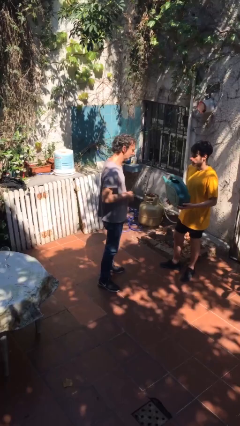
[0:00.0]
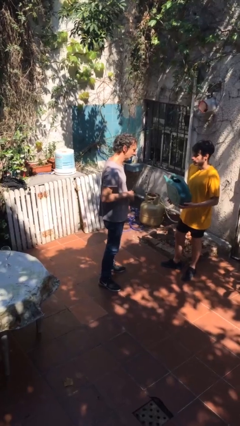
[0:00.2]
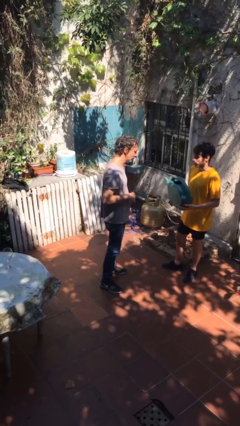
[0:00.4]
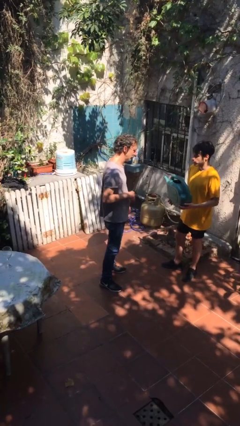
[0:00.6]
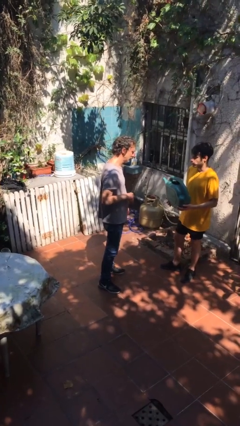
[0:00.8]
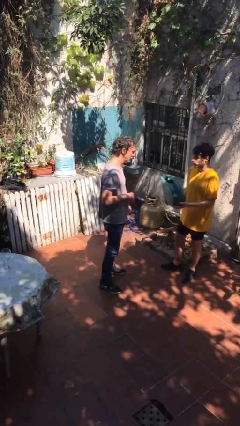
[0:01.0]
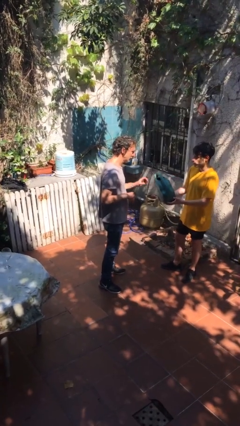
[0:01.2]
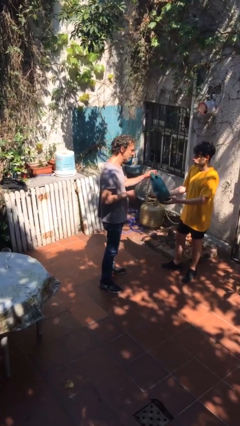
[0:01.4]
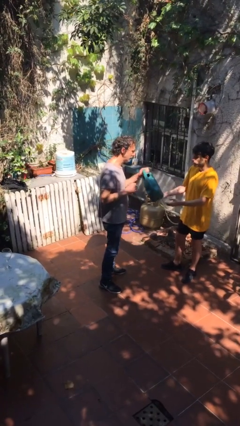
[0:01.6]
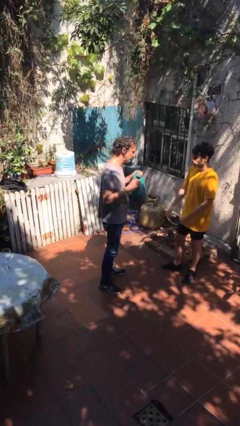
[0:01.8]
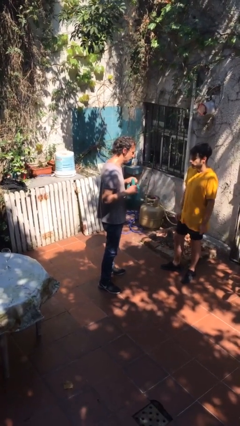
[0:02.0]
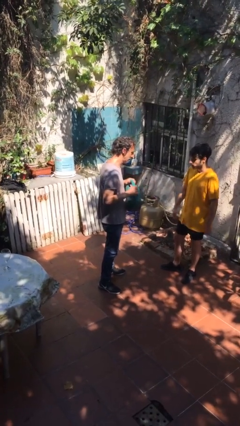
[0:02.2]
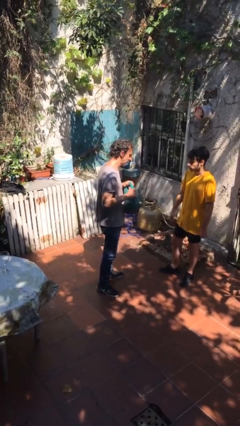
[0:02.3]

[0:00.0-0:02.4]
person transfers object to person

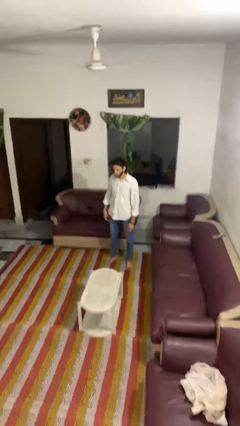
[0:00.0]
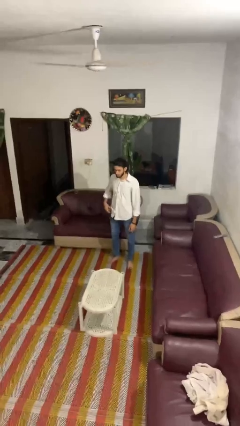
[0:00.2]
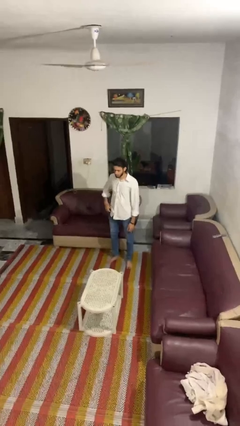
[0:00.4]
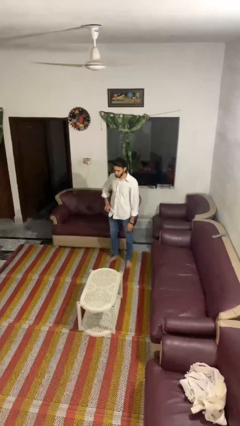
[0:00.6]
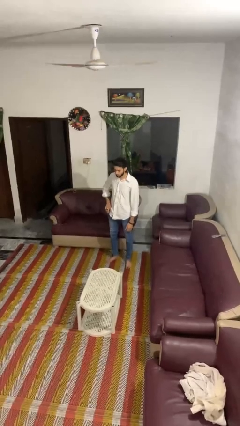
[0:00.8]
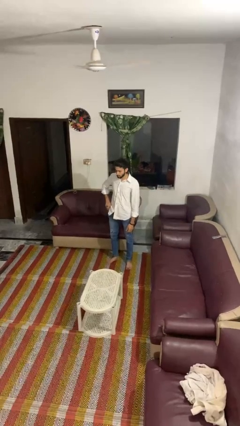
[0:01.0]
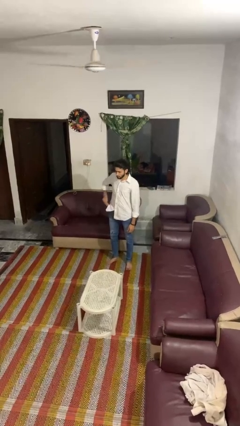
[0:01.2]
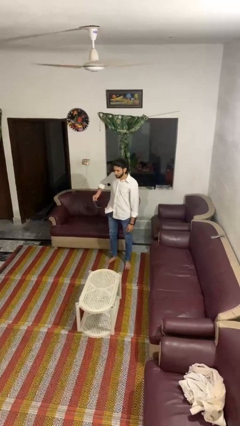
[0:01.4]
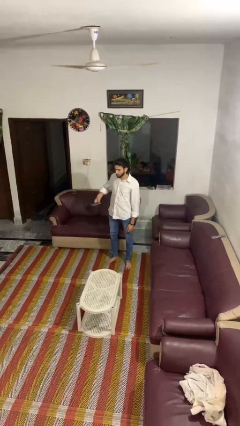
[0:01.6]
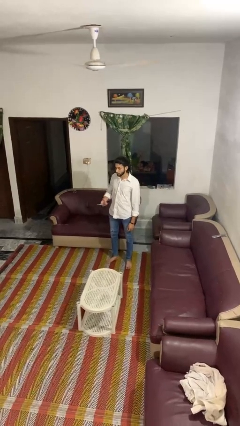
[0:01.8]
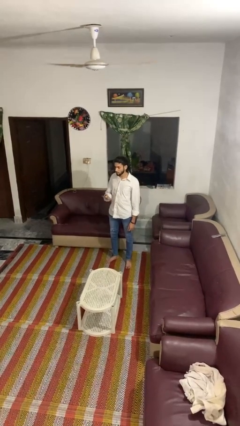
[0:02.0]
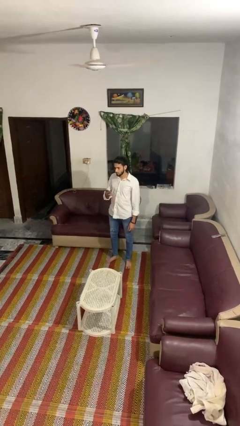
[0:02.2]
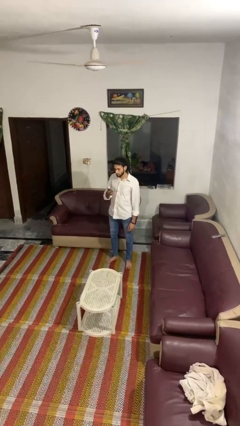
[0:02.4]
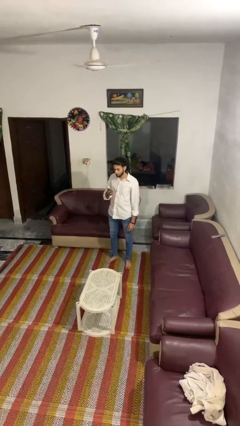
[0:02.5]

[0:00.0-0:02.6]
person takes phone from pocket

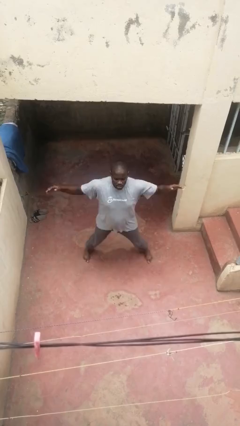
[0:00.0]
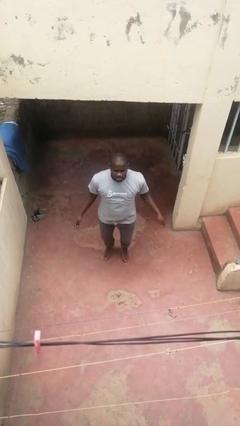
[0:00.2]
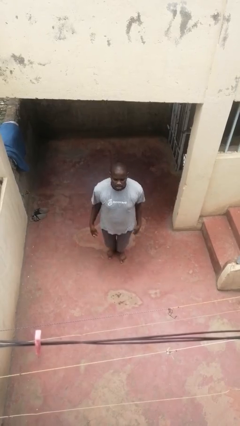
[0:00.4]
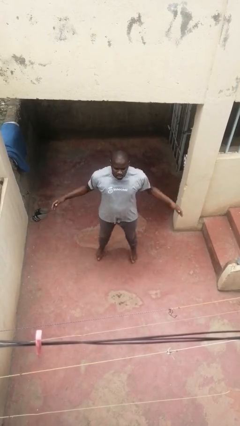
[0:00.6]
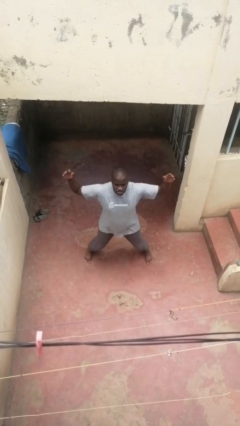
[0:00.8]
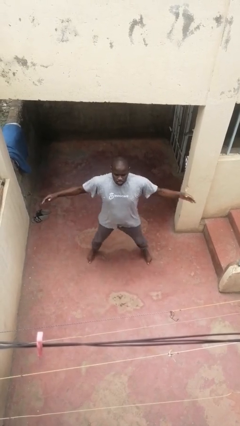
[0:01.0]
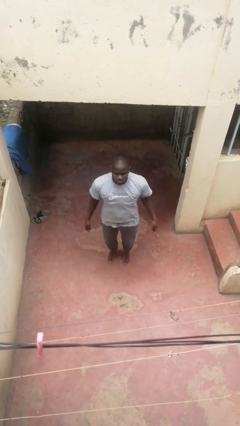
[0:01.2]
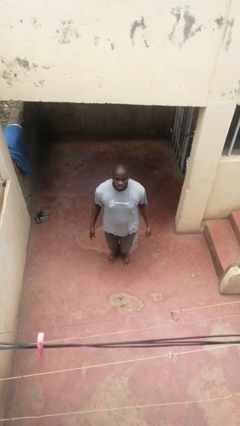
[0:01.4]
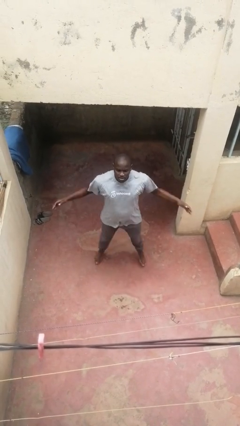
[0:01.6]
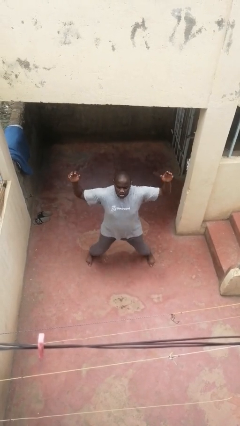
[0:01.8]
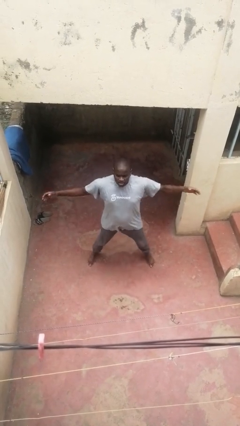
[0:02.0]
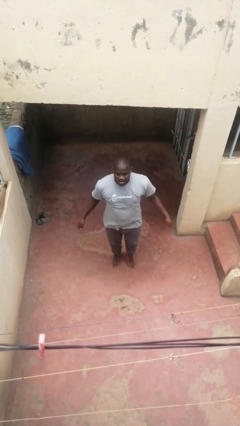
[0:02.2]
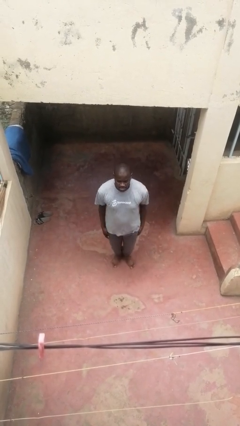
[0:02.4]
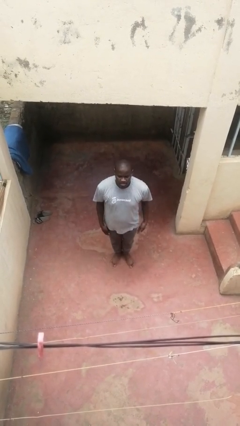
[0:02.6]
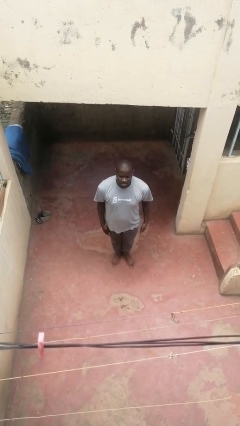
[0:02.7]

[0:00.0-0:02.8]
person exercises with jumping jacks

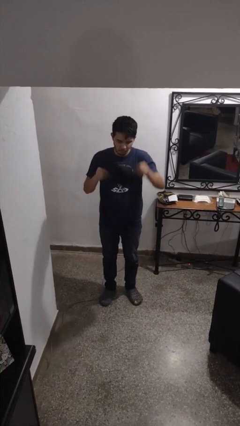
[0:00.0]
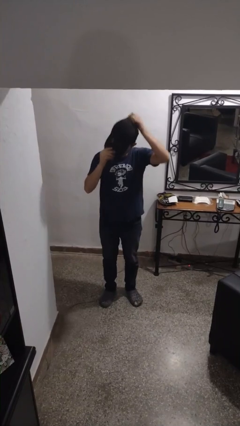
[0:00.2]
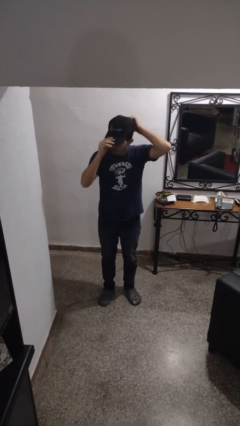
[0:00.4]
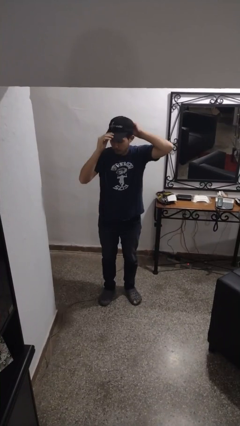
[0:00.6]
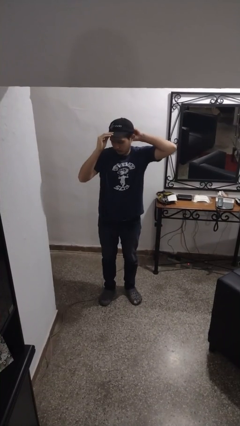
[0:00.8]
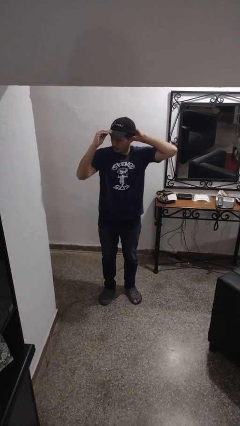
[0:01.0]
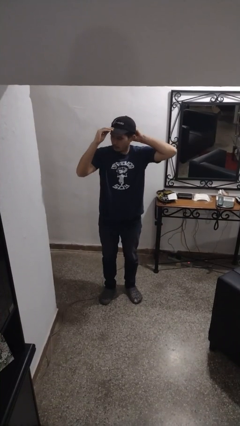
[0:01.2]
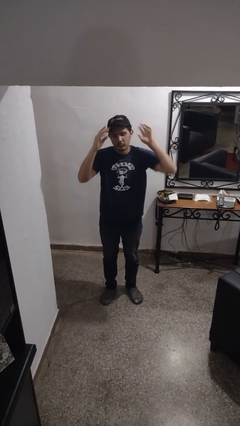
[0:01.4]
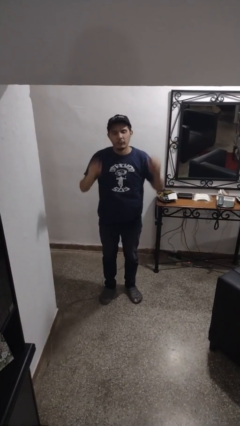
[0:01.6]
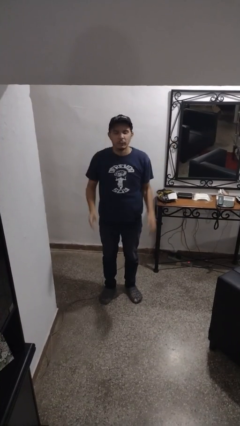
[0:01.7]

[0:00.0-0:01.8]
person puts on hat

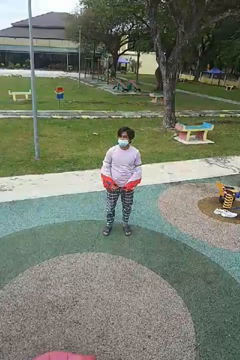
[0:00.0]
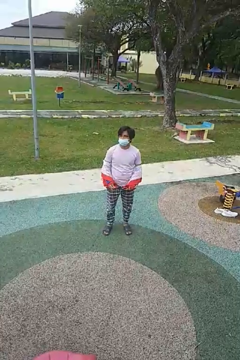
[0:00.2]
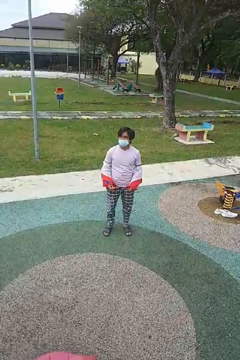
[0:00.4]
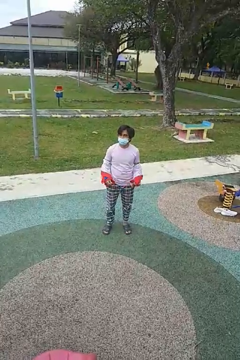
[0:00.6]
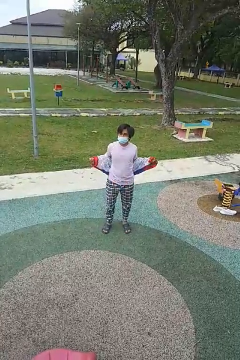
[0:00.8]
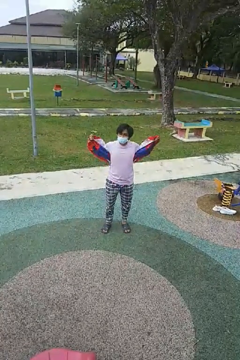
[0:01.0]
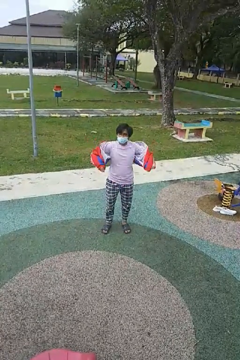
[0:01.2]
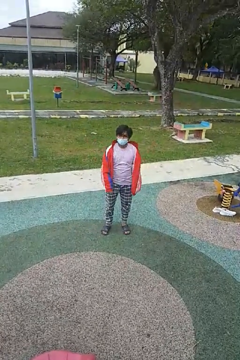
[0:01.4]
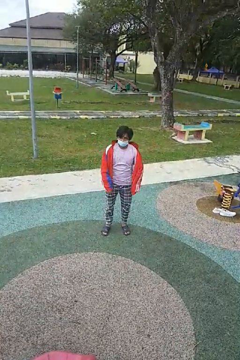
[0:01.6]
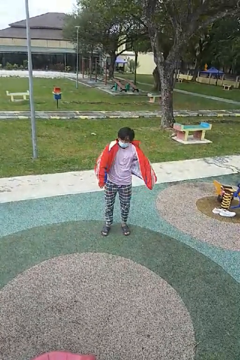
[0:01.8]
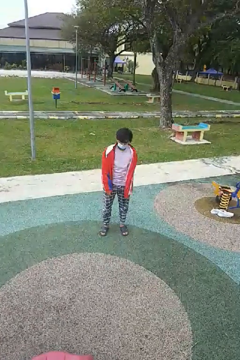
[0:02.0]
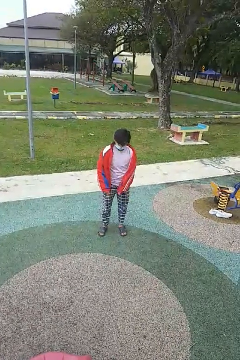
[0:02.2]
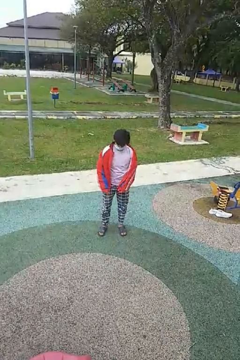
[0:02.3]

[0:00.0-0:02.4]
person puts on jacket

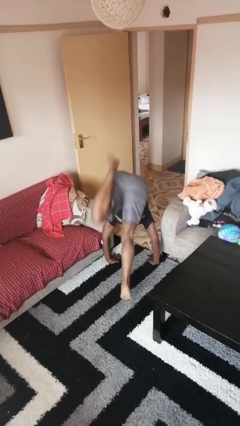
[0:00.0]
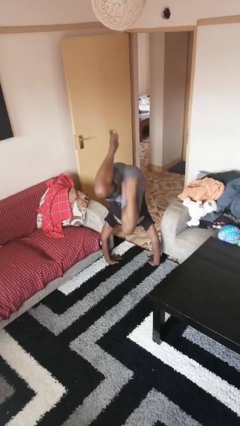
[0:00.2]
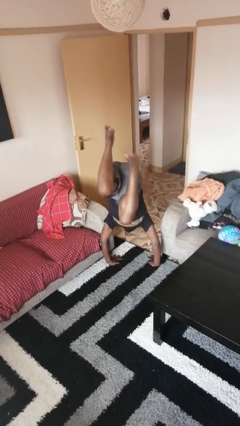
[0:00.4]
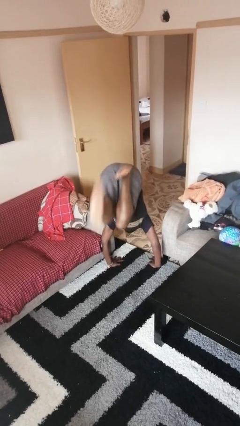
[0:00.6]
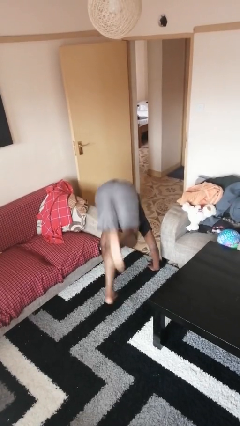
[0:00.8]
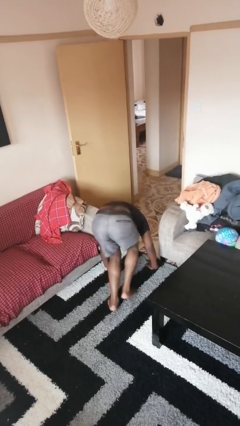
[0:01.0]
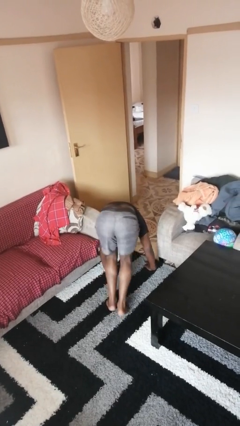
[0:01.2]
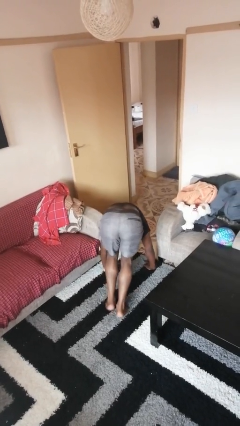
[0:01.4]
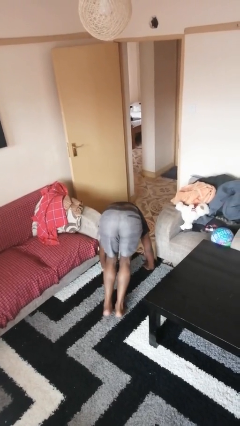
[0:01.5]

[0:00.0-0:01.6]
person handstand

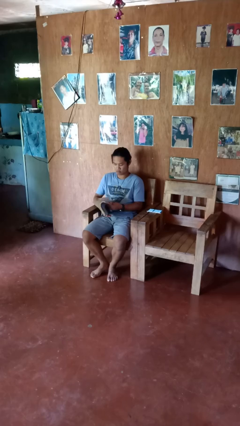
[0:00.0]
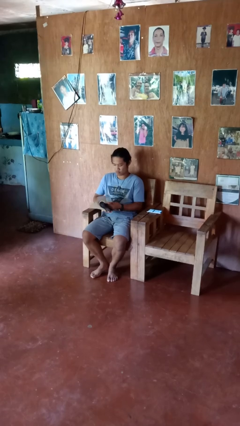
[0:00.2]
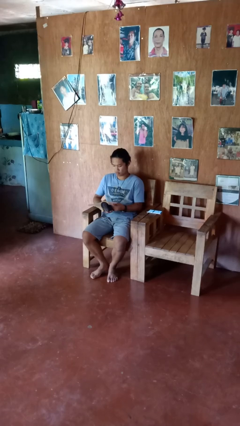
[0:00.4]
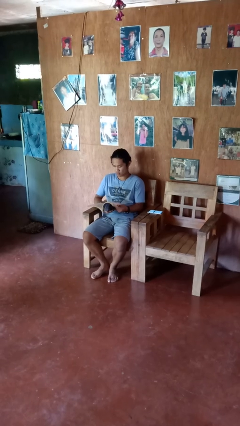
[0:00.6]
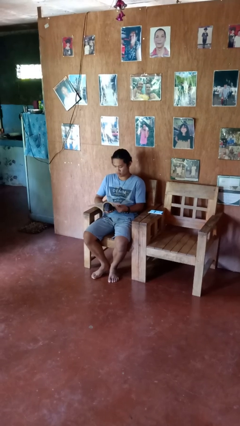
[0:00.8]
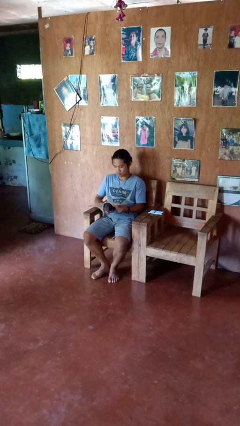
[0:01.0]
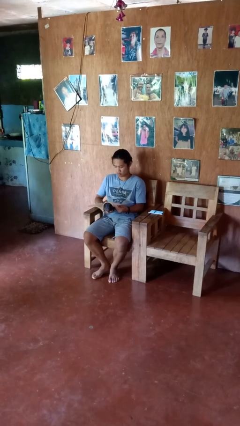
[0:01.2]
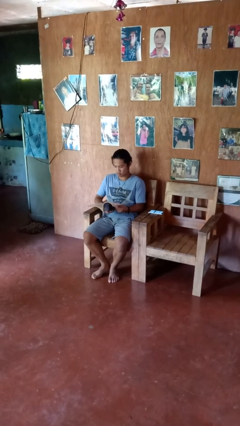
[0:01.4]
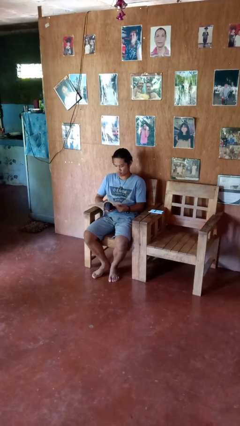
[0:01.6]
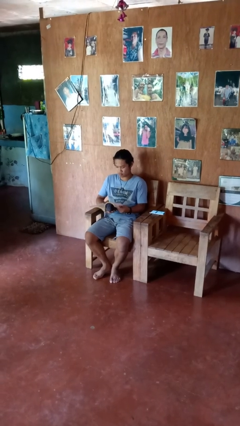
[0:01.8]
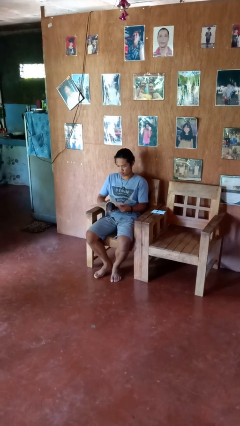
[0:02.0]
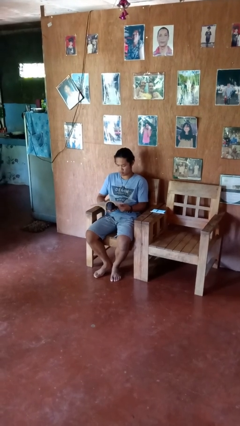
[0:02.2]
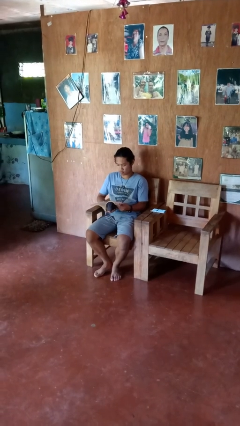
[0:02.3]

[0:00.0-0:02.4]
person reads book

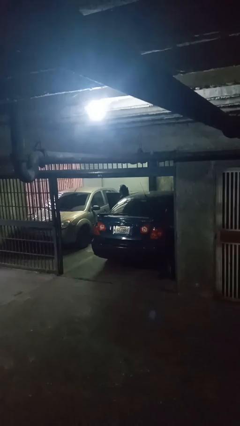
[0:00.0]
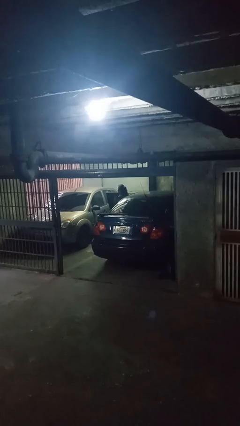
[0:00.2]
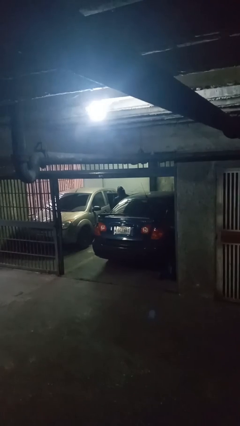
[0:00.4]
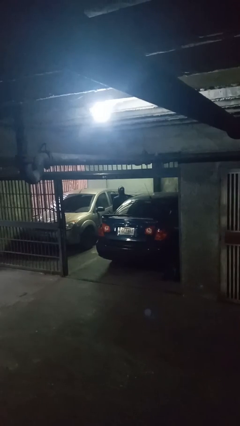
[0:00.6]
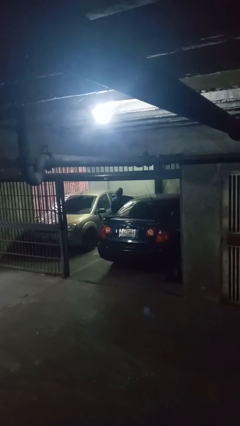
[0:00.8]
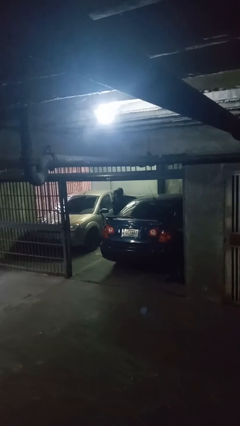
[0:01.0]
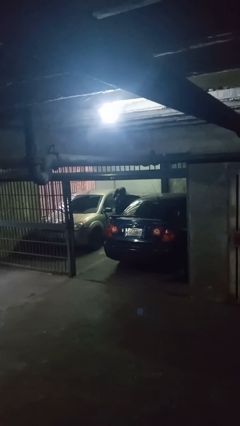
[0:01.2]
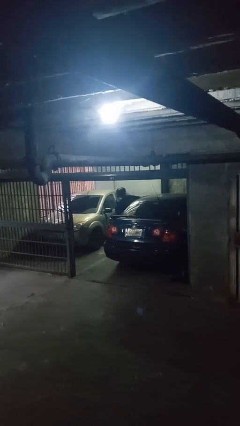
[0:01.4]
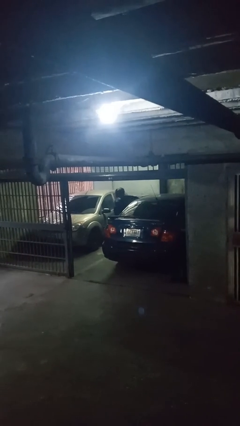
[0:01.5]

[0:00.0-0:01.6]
person exits car
